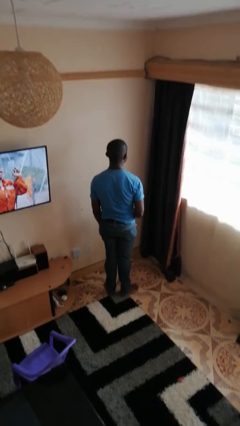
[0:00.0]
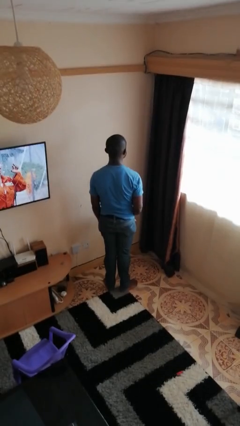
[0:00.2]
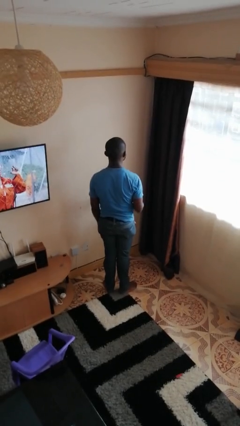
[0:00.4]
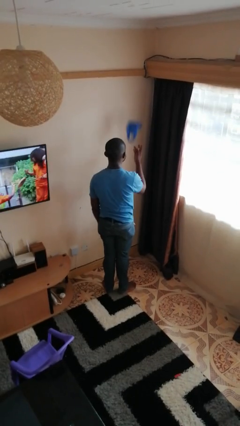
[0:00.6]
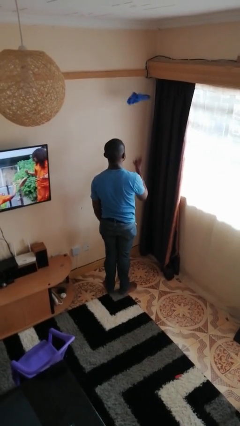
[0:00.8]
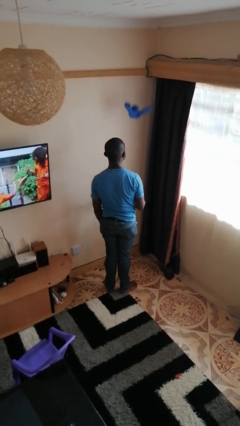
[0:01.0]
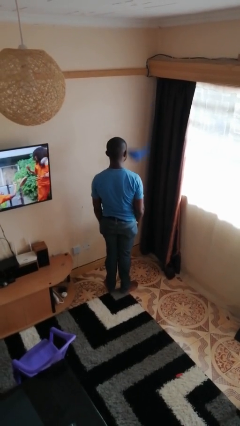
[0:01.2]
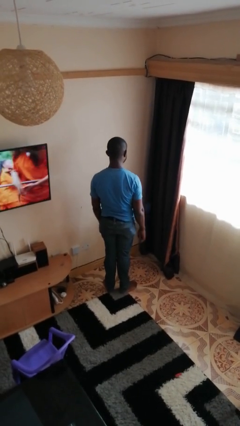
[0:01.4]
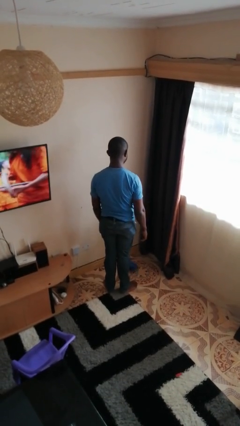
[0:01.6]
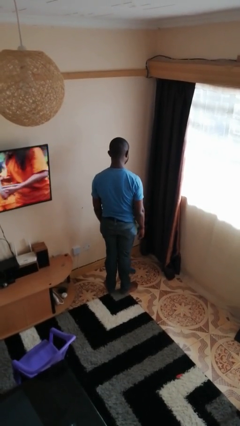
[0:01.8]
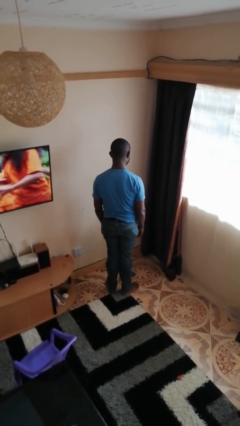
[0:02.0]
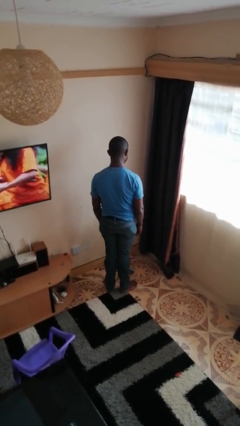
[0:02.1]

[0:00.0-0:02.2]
person throws object into air

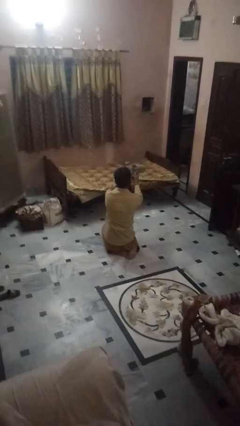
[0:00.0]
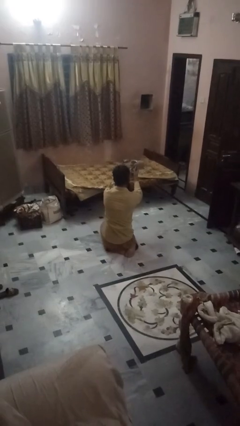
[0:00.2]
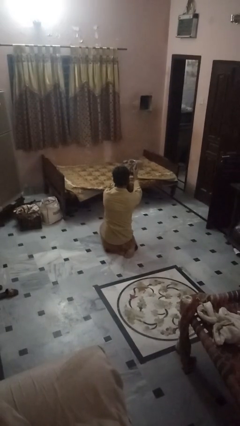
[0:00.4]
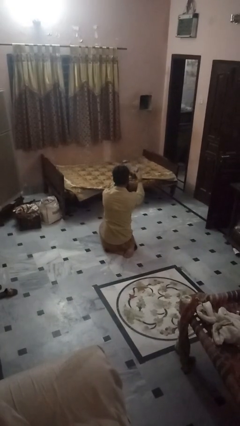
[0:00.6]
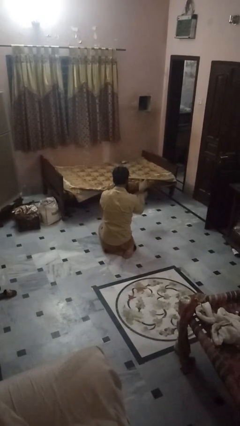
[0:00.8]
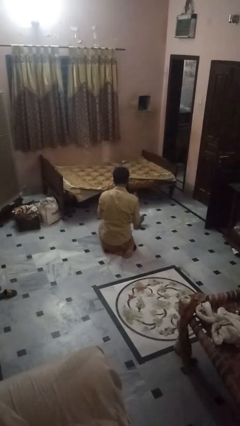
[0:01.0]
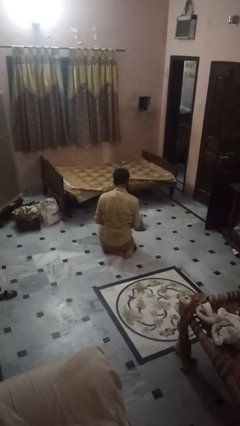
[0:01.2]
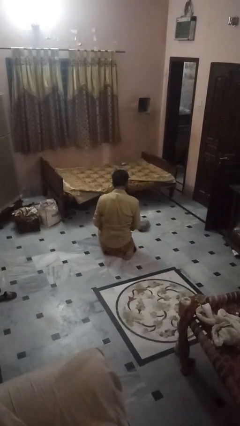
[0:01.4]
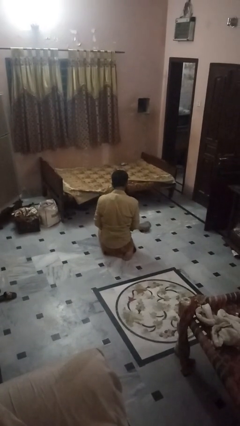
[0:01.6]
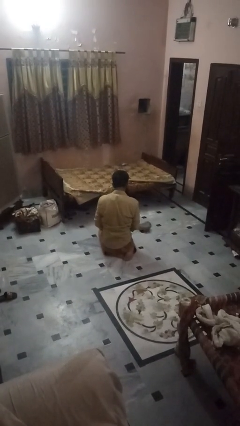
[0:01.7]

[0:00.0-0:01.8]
person catches dropped object

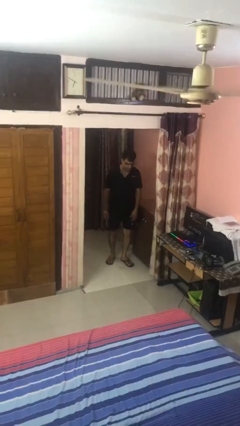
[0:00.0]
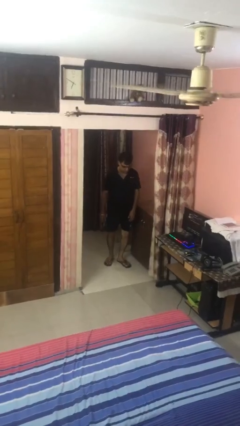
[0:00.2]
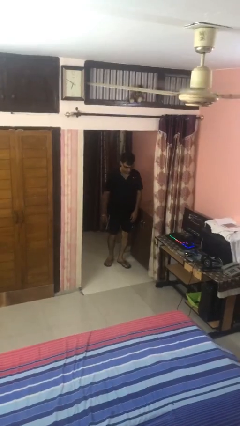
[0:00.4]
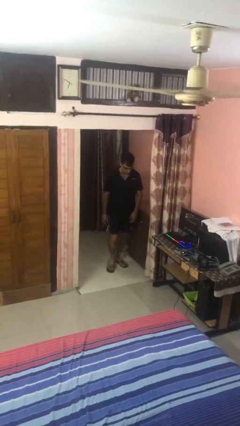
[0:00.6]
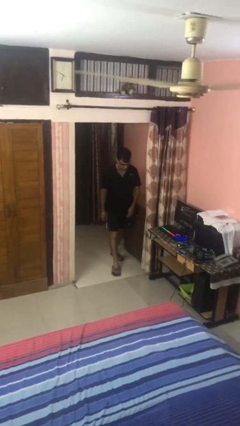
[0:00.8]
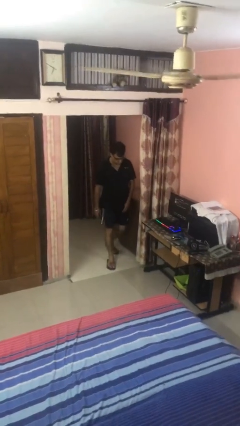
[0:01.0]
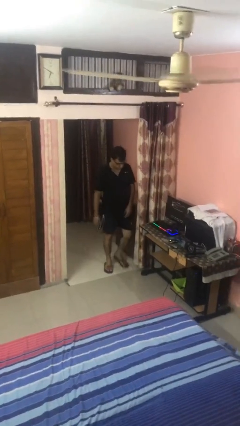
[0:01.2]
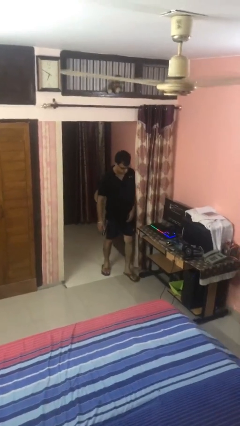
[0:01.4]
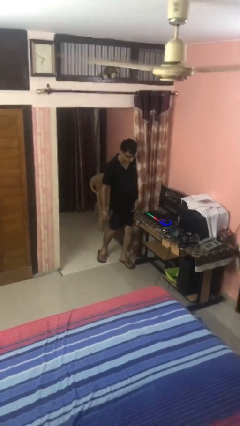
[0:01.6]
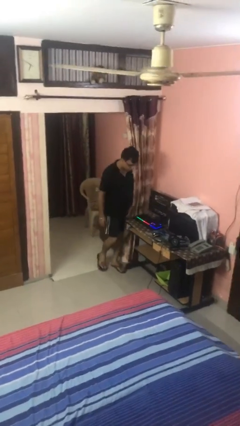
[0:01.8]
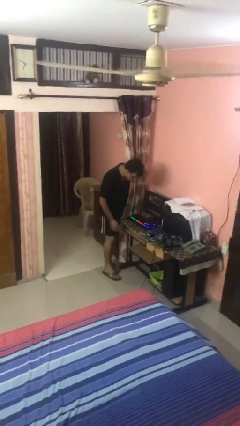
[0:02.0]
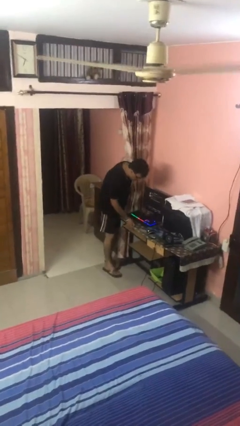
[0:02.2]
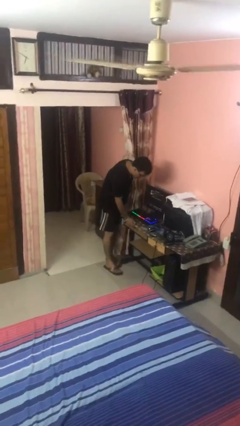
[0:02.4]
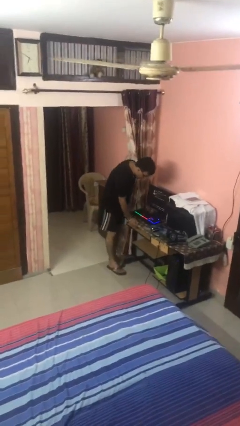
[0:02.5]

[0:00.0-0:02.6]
person bumps into table

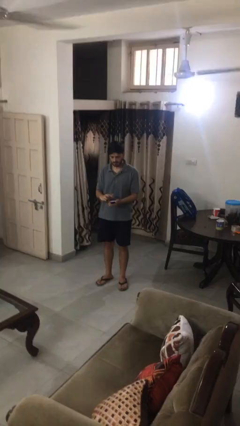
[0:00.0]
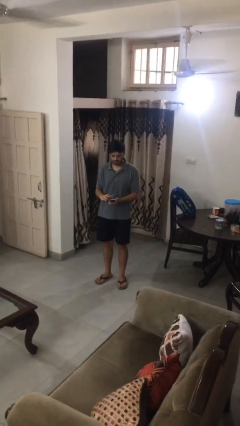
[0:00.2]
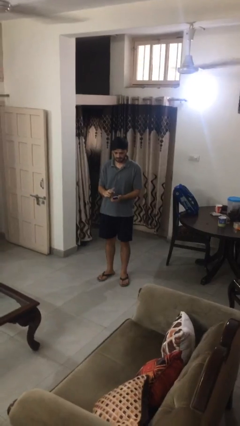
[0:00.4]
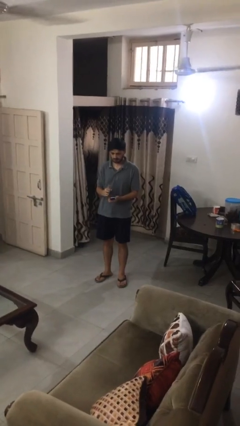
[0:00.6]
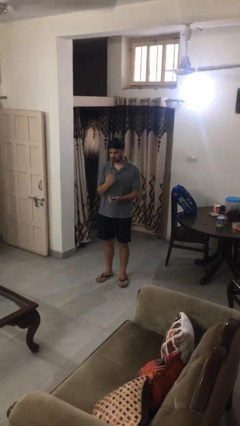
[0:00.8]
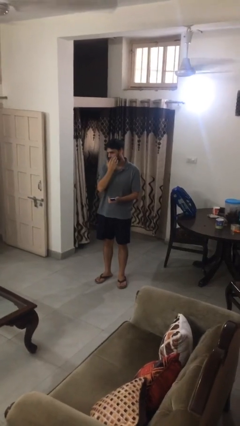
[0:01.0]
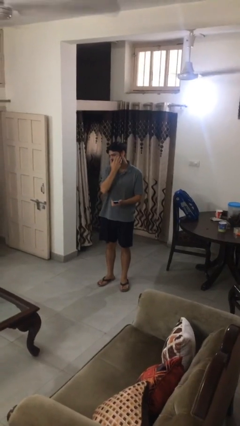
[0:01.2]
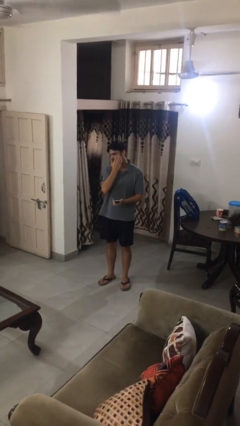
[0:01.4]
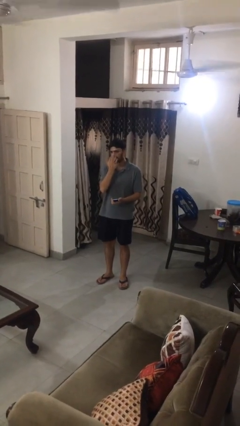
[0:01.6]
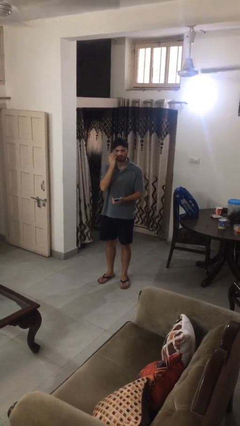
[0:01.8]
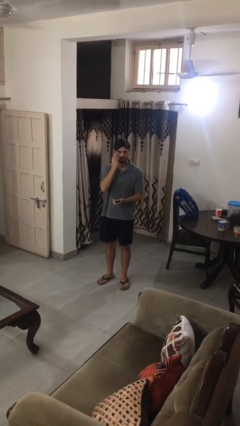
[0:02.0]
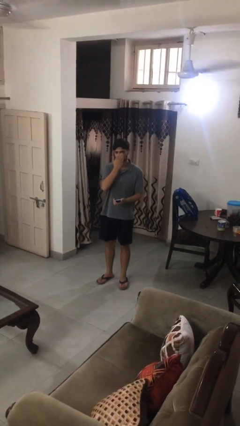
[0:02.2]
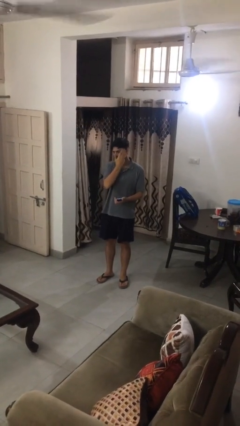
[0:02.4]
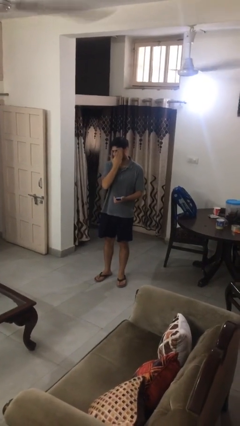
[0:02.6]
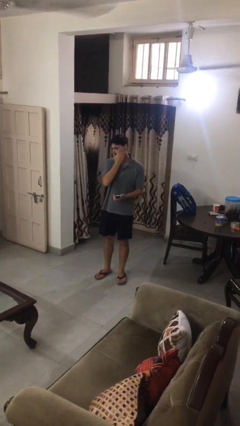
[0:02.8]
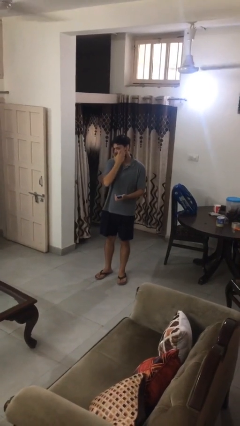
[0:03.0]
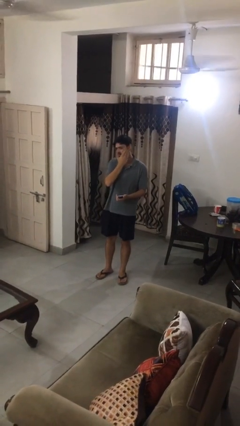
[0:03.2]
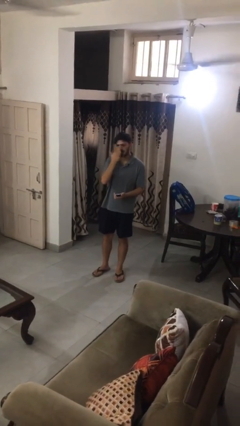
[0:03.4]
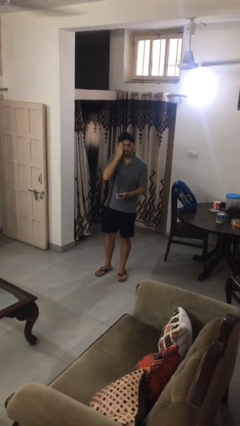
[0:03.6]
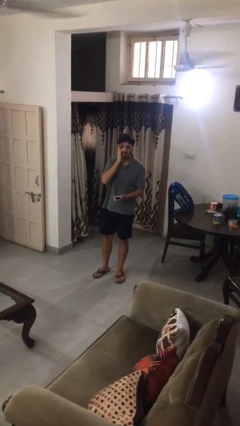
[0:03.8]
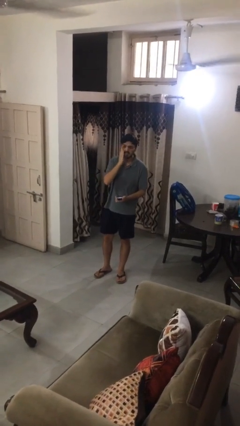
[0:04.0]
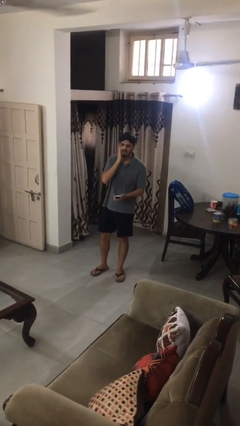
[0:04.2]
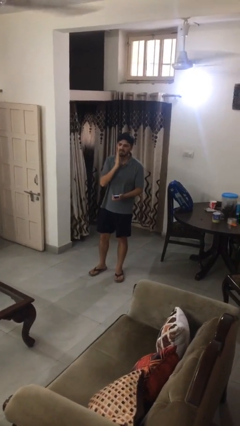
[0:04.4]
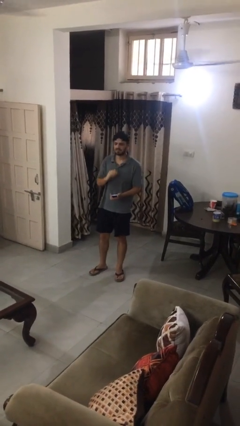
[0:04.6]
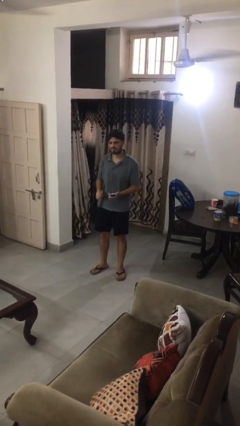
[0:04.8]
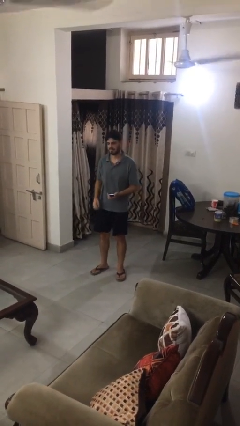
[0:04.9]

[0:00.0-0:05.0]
person applies facial moisturizer

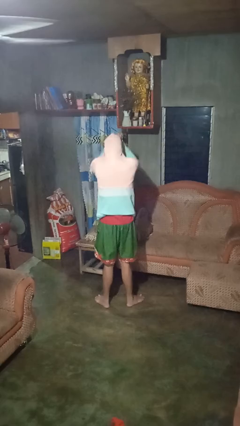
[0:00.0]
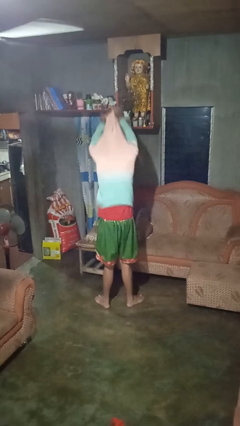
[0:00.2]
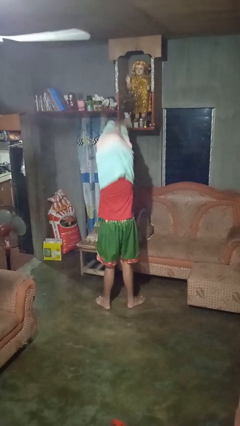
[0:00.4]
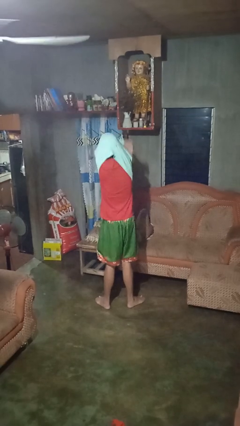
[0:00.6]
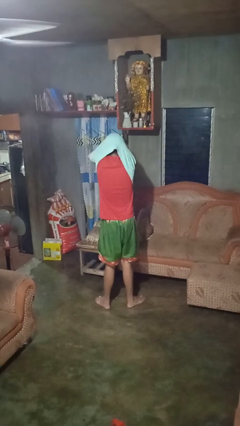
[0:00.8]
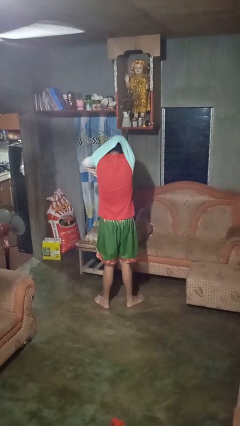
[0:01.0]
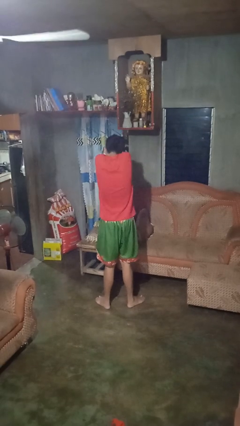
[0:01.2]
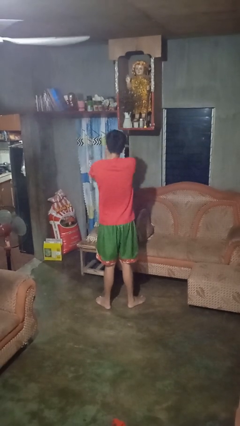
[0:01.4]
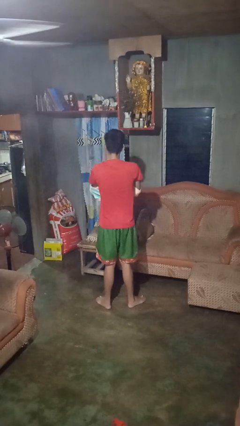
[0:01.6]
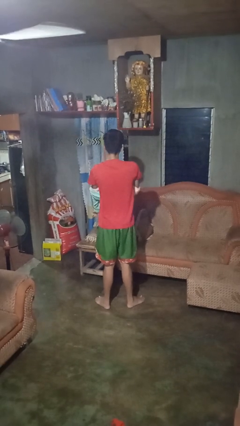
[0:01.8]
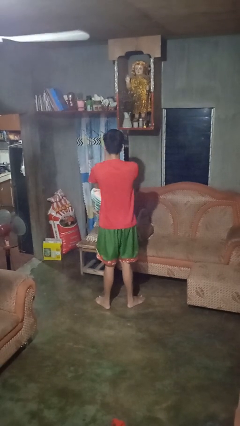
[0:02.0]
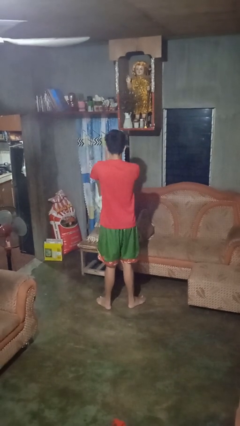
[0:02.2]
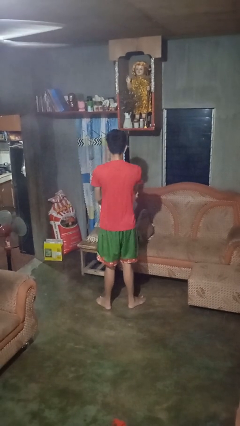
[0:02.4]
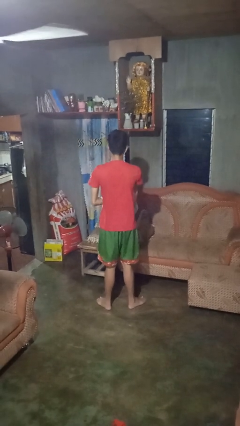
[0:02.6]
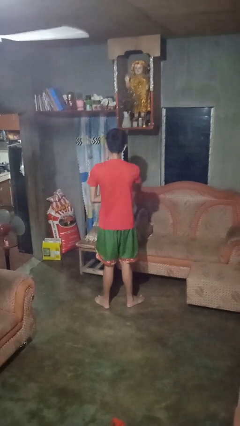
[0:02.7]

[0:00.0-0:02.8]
person takes off hoodie

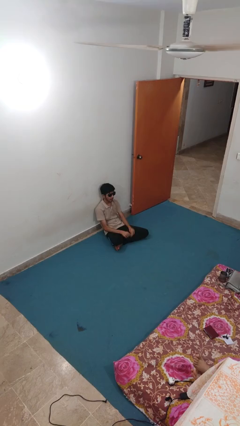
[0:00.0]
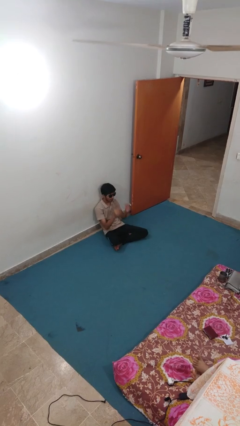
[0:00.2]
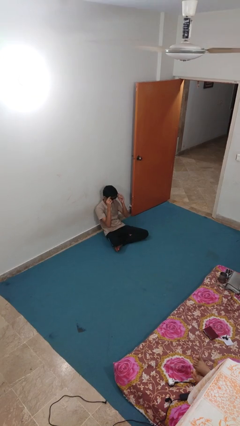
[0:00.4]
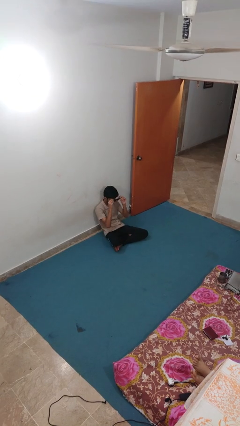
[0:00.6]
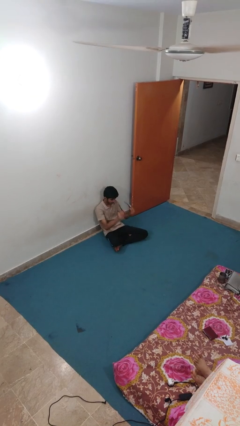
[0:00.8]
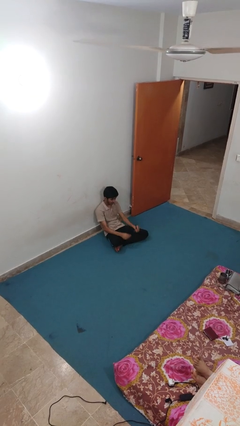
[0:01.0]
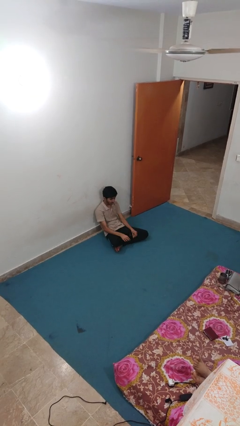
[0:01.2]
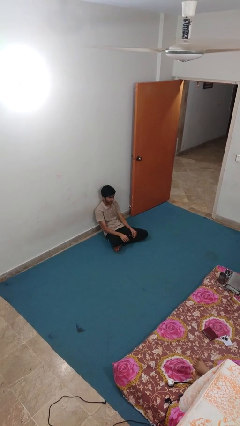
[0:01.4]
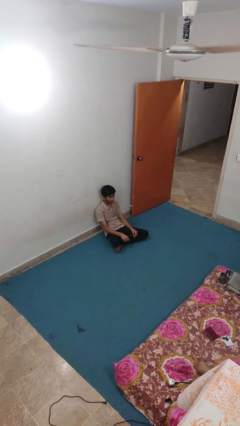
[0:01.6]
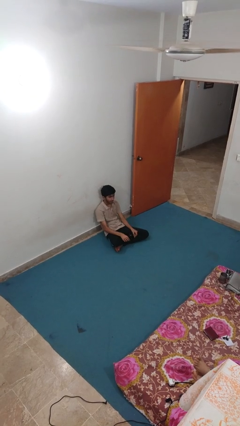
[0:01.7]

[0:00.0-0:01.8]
person takes off sunglasses

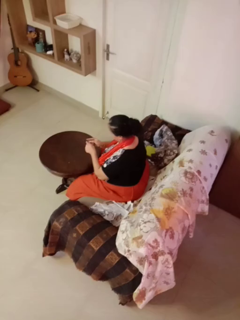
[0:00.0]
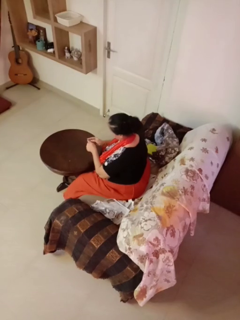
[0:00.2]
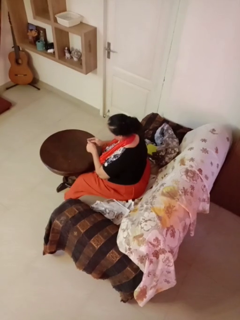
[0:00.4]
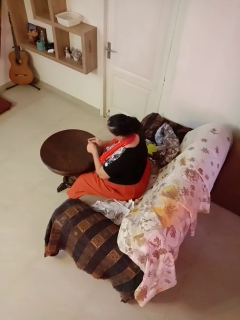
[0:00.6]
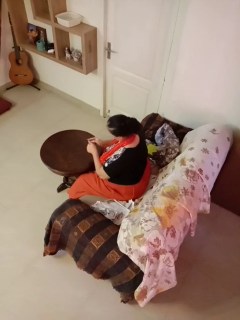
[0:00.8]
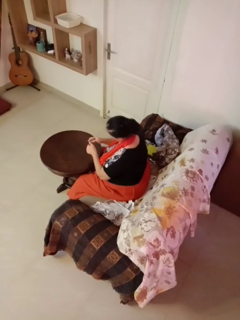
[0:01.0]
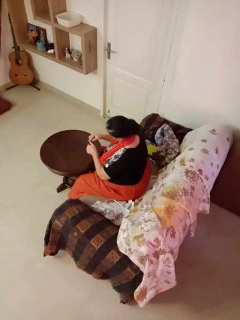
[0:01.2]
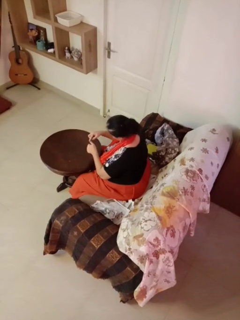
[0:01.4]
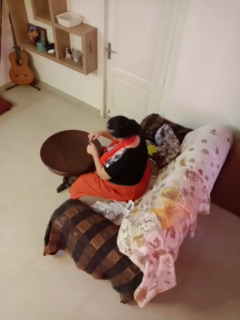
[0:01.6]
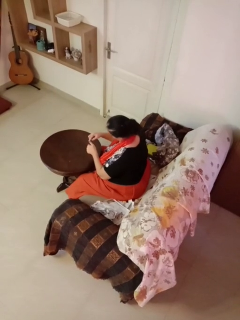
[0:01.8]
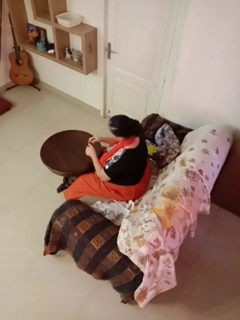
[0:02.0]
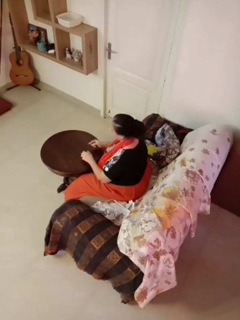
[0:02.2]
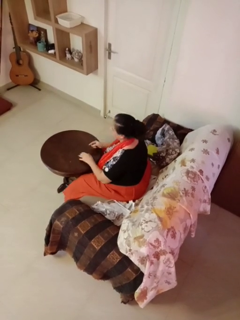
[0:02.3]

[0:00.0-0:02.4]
person files fingernails
